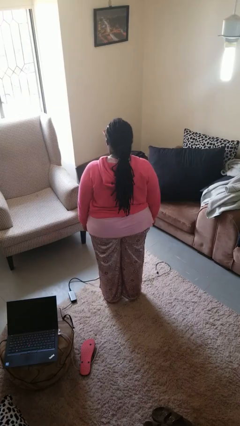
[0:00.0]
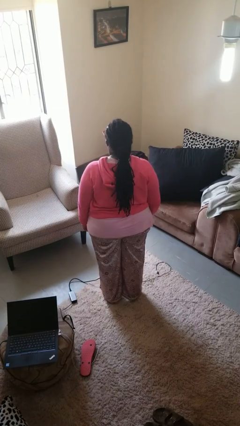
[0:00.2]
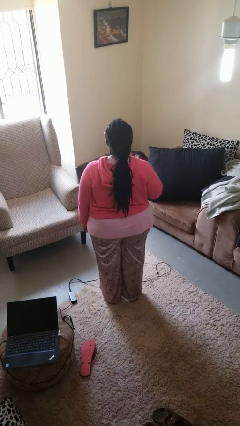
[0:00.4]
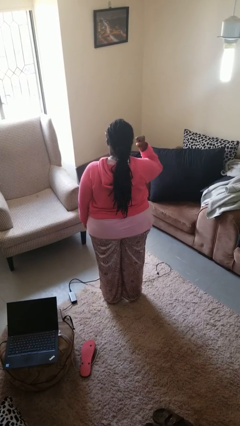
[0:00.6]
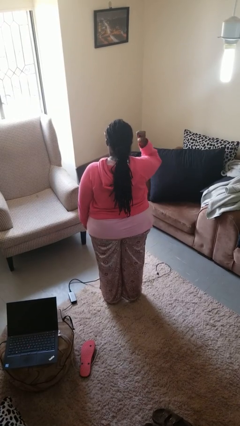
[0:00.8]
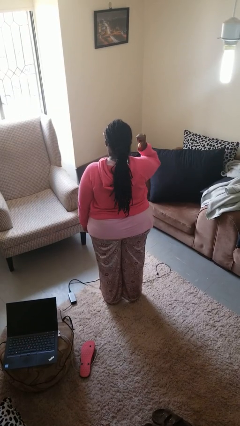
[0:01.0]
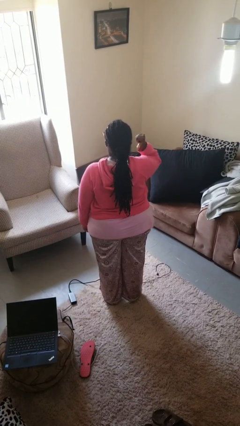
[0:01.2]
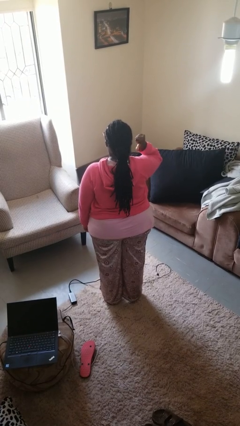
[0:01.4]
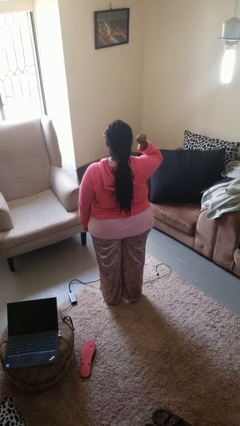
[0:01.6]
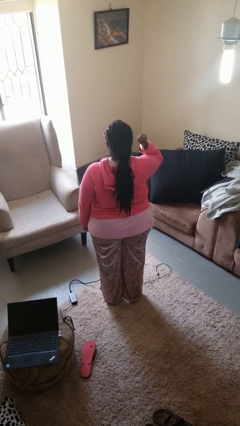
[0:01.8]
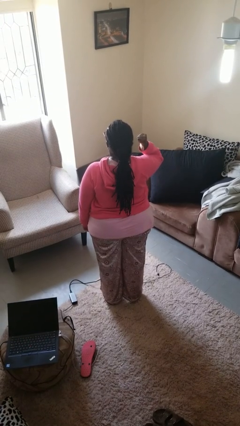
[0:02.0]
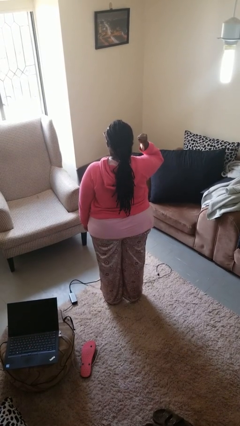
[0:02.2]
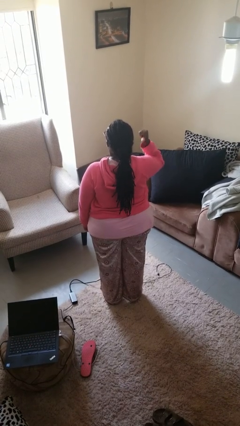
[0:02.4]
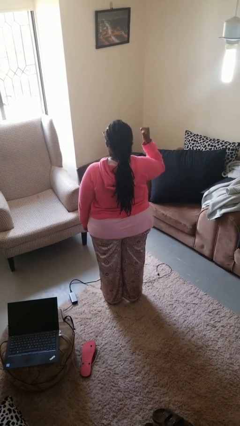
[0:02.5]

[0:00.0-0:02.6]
person gestures behind me

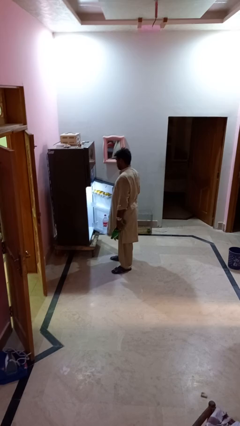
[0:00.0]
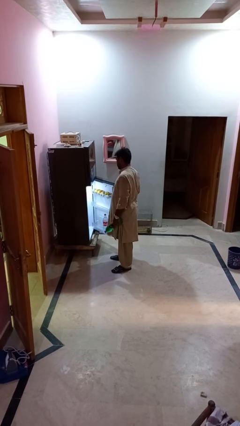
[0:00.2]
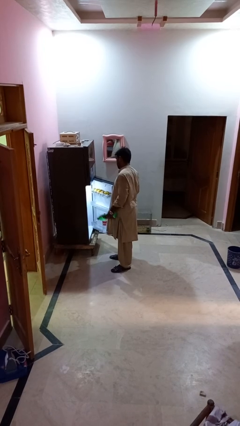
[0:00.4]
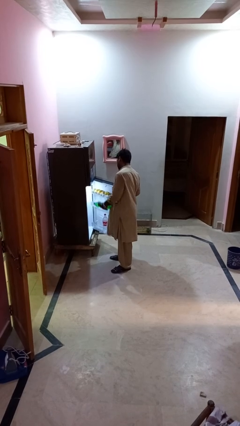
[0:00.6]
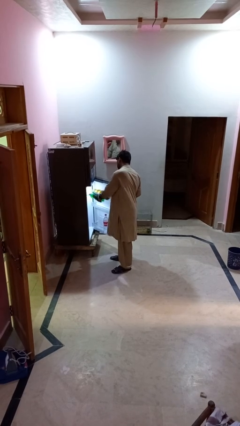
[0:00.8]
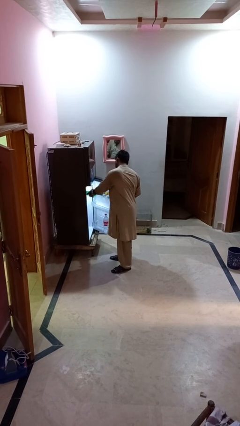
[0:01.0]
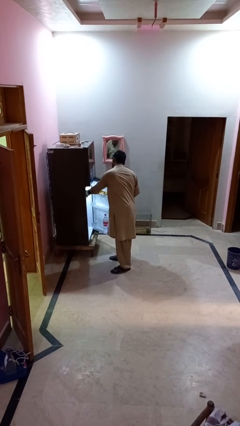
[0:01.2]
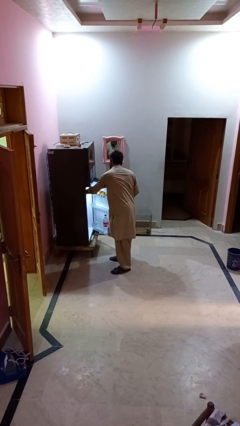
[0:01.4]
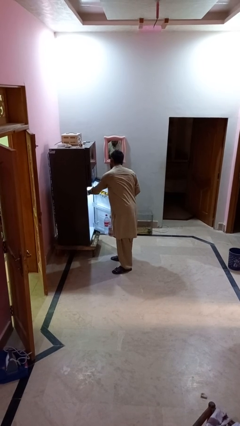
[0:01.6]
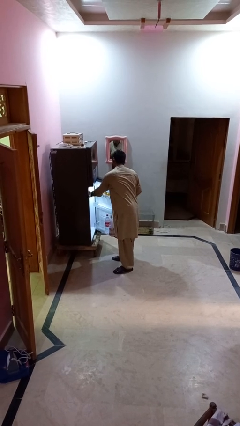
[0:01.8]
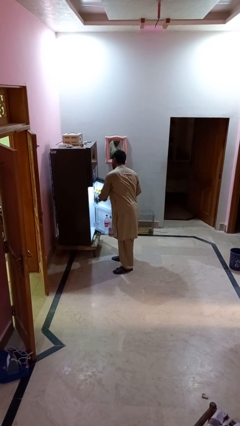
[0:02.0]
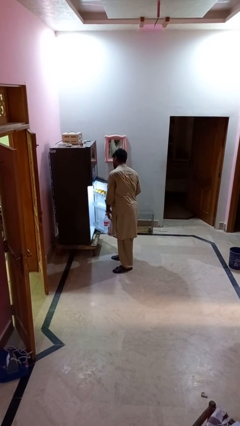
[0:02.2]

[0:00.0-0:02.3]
person puts object into refrigerator

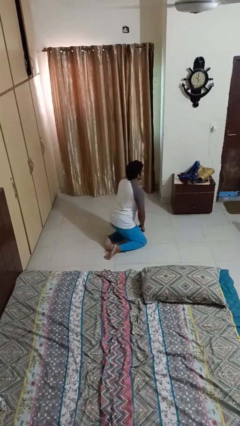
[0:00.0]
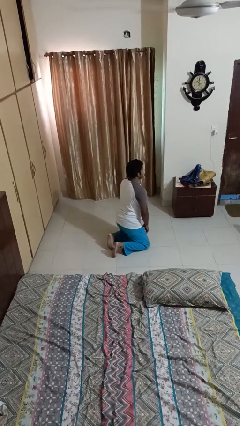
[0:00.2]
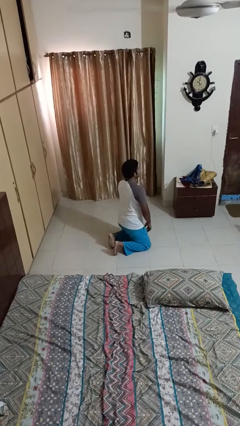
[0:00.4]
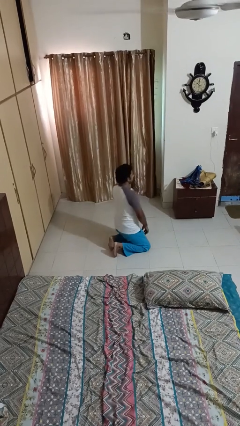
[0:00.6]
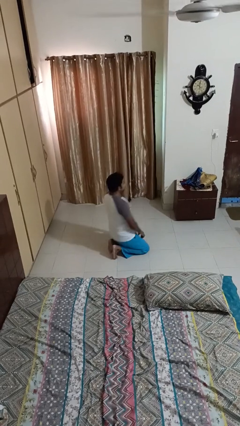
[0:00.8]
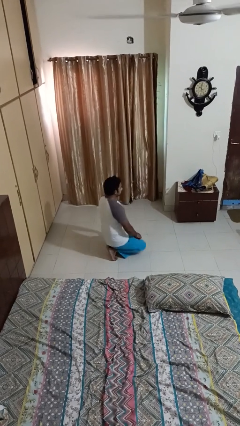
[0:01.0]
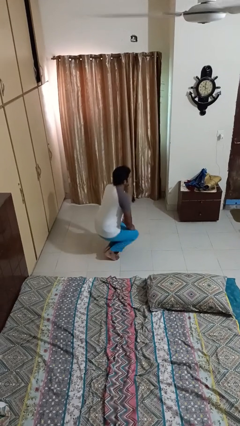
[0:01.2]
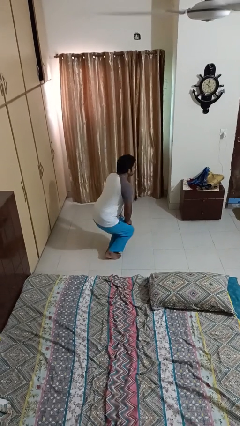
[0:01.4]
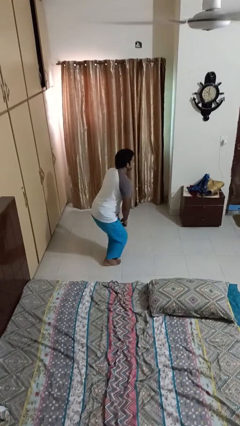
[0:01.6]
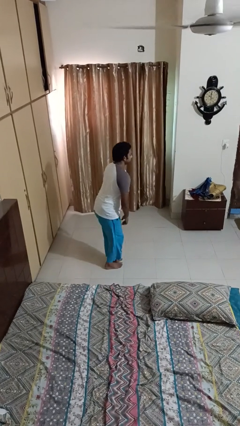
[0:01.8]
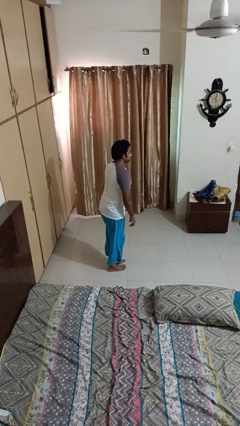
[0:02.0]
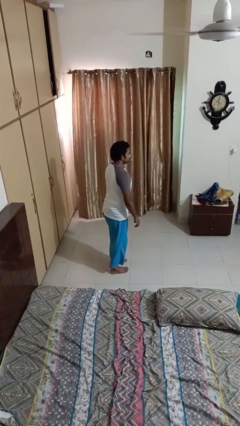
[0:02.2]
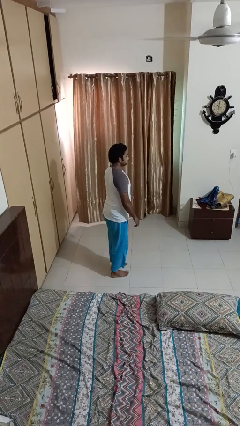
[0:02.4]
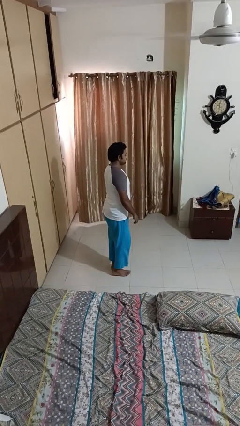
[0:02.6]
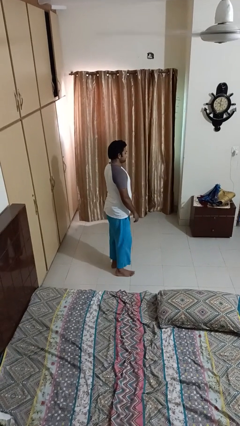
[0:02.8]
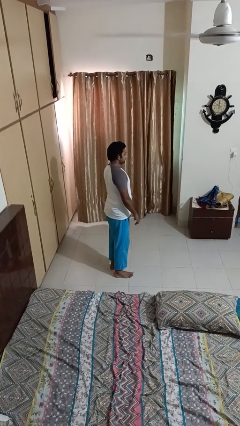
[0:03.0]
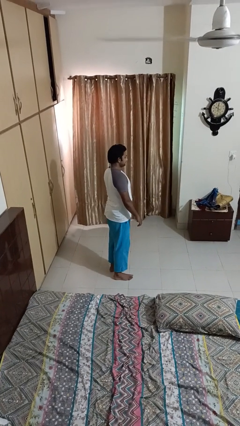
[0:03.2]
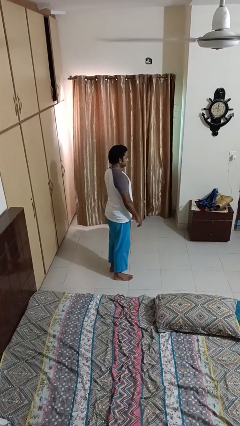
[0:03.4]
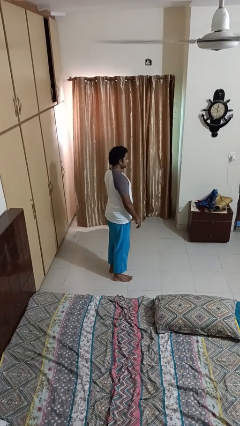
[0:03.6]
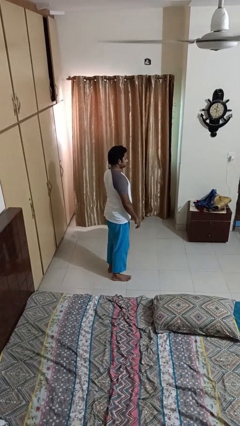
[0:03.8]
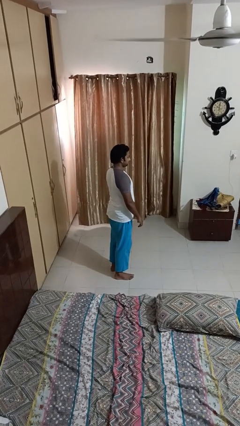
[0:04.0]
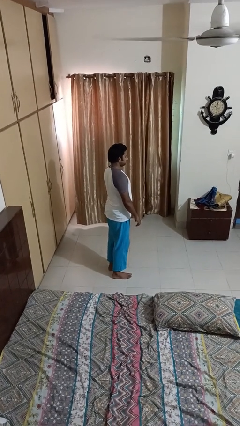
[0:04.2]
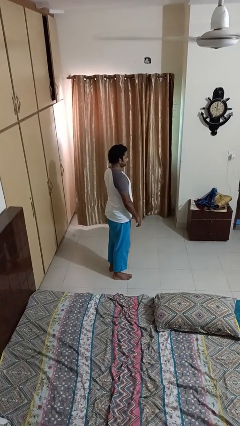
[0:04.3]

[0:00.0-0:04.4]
person stands up from floor

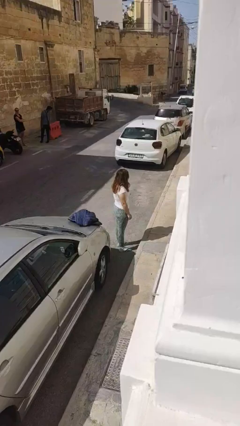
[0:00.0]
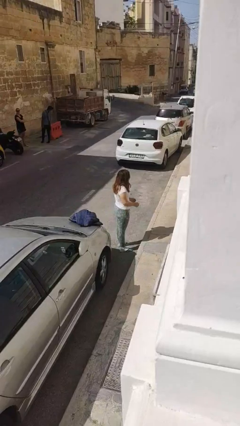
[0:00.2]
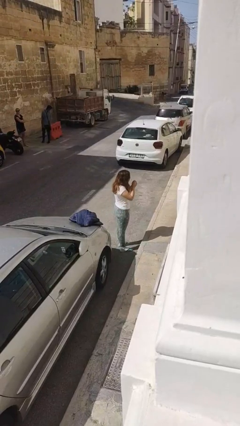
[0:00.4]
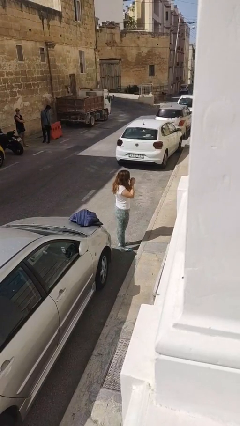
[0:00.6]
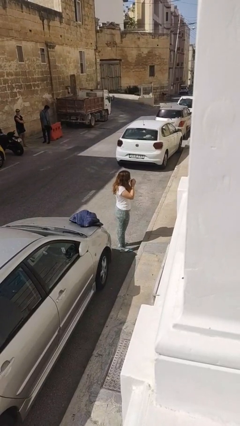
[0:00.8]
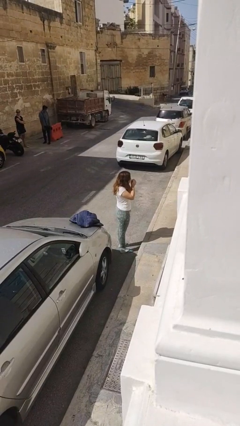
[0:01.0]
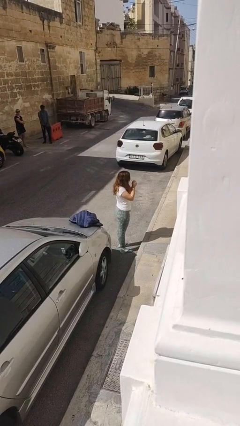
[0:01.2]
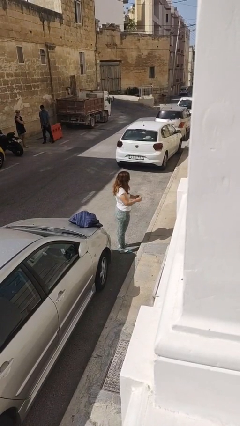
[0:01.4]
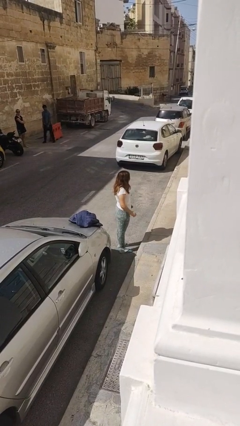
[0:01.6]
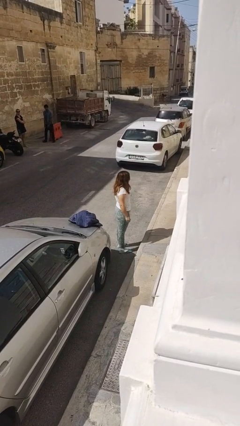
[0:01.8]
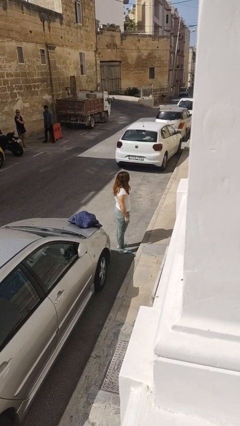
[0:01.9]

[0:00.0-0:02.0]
person blows into hands

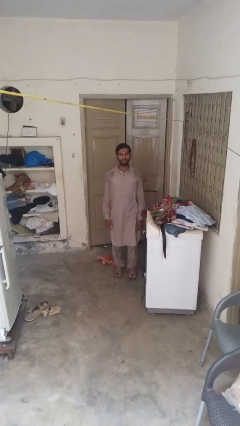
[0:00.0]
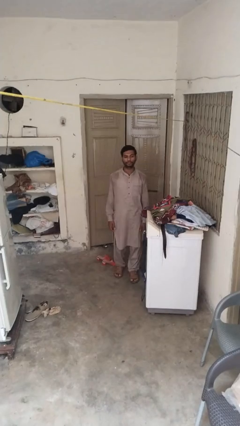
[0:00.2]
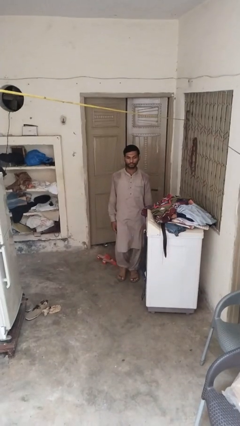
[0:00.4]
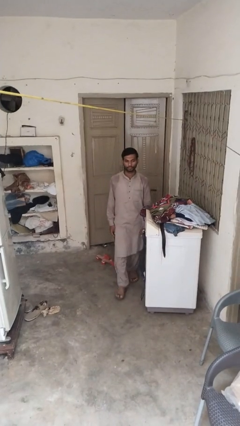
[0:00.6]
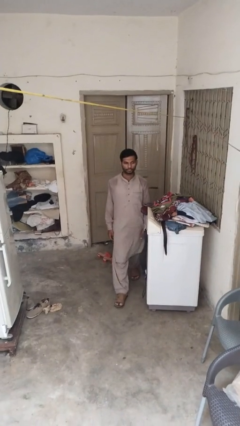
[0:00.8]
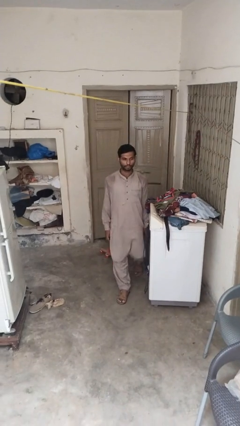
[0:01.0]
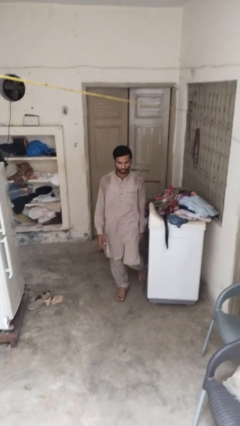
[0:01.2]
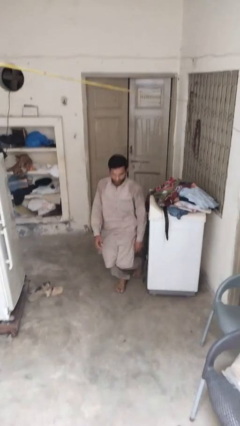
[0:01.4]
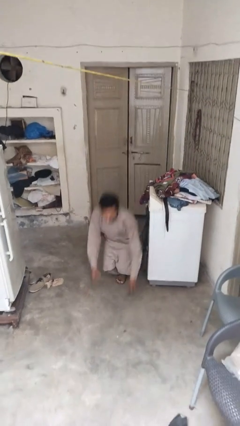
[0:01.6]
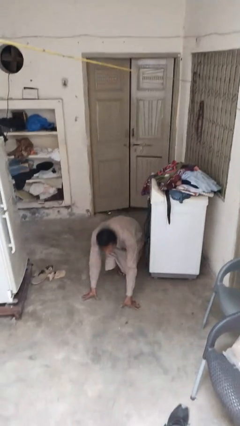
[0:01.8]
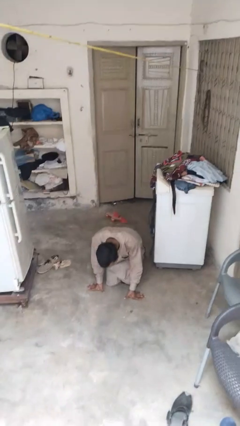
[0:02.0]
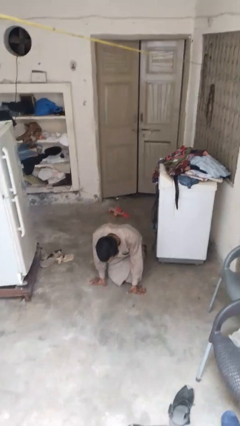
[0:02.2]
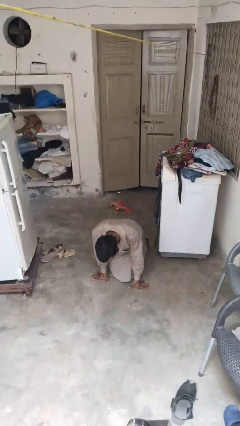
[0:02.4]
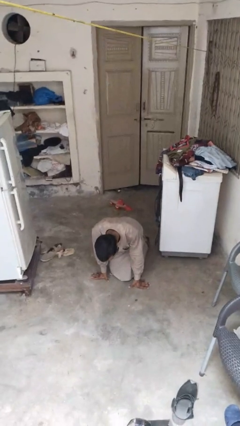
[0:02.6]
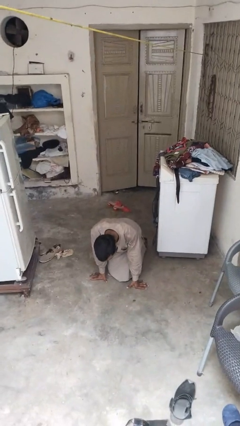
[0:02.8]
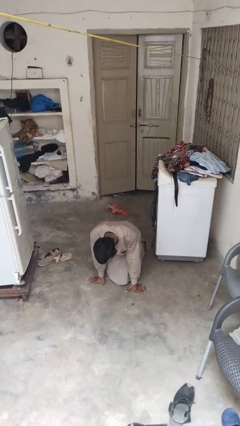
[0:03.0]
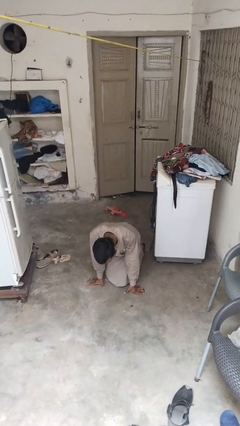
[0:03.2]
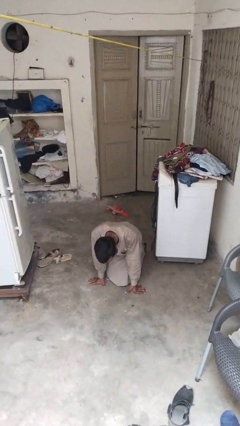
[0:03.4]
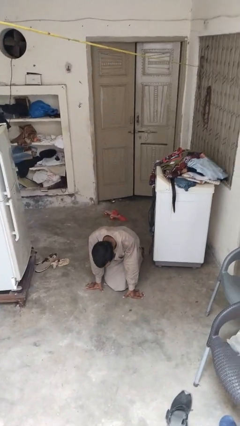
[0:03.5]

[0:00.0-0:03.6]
person trips on object on floor

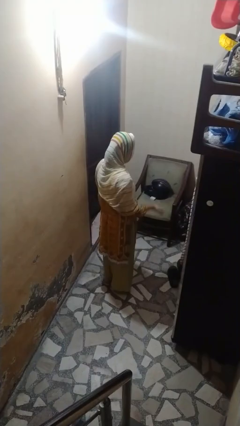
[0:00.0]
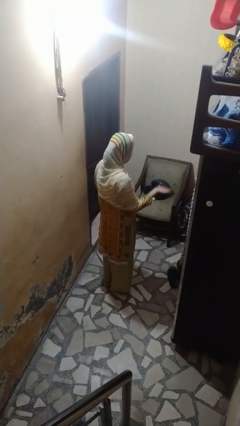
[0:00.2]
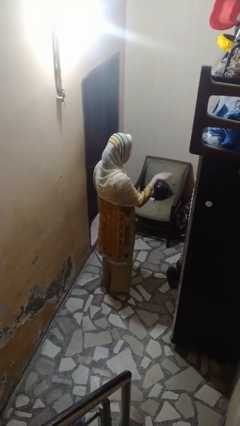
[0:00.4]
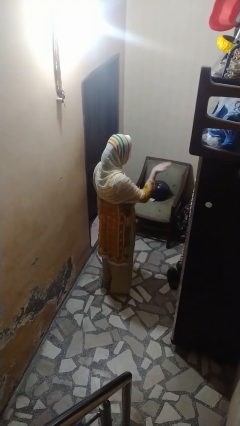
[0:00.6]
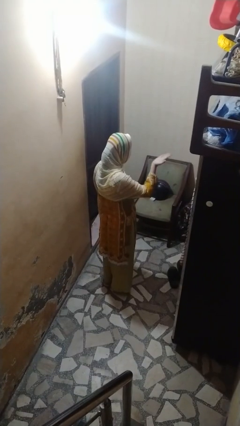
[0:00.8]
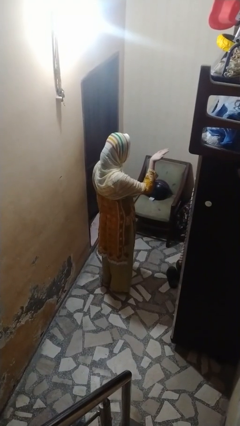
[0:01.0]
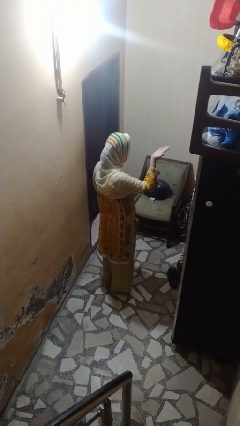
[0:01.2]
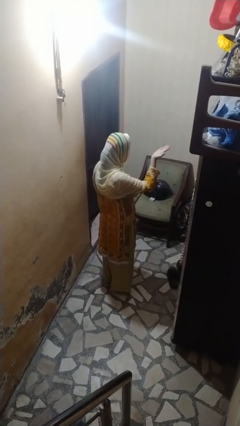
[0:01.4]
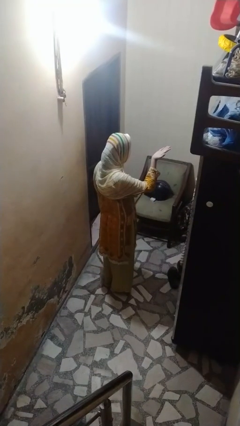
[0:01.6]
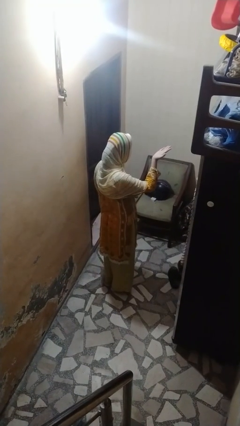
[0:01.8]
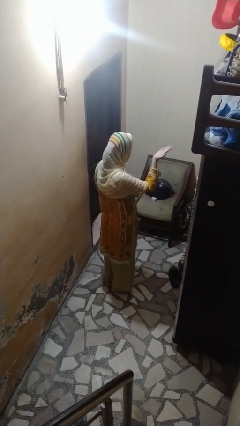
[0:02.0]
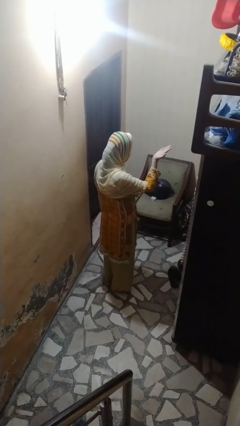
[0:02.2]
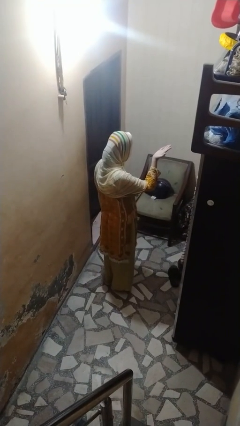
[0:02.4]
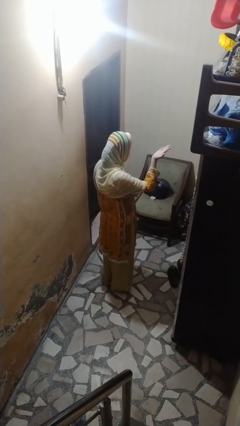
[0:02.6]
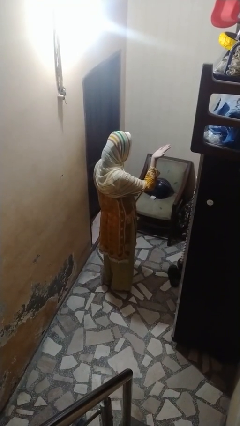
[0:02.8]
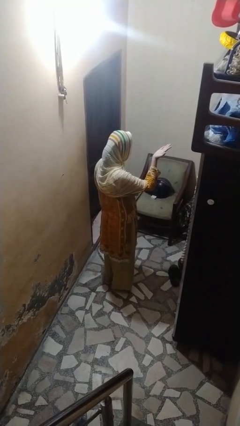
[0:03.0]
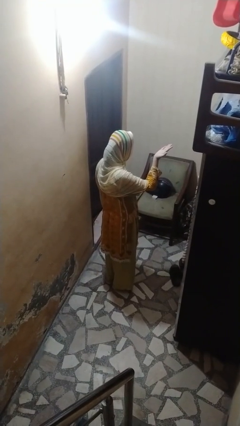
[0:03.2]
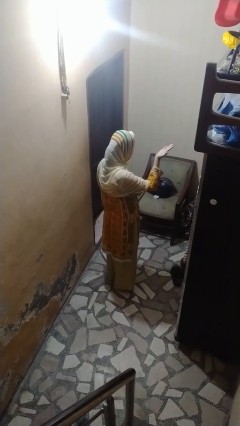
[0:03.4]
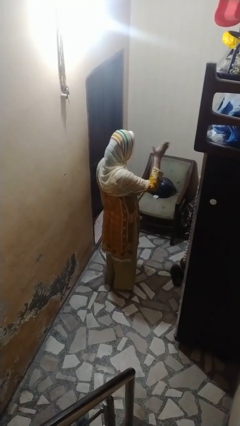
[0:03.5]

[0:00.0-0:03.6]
person gestures swipe up
